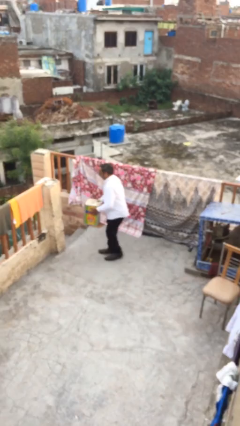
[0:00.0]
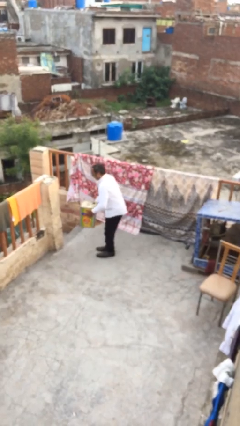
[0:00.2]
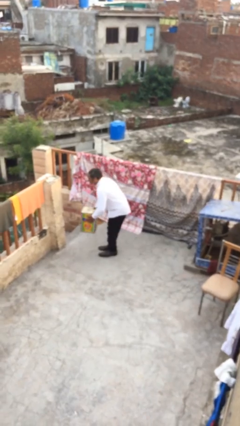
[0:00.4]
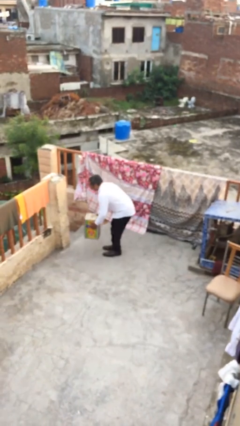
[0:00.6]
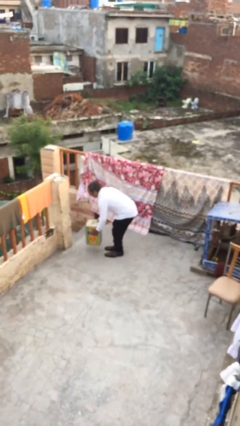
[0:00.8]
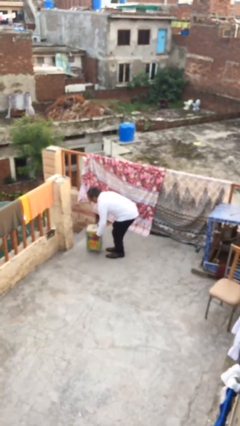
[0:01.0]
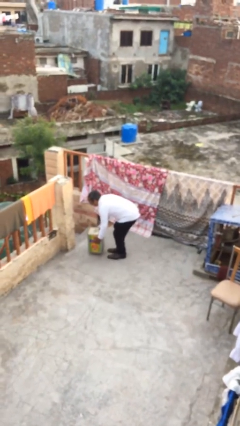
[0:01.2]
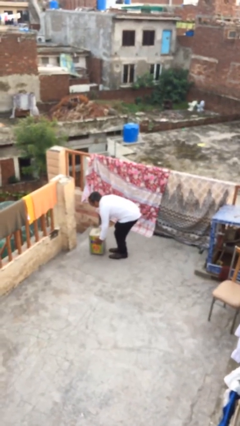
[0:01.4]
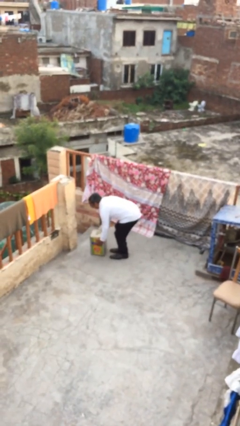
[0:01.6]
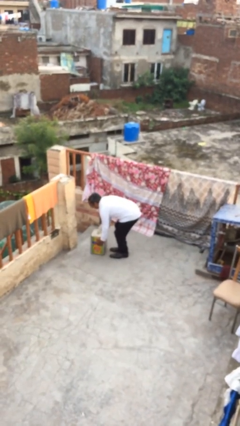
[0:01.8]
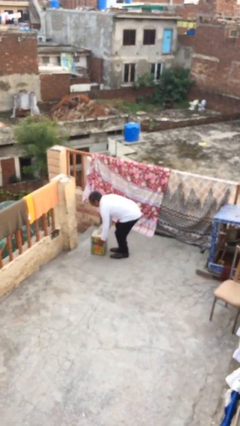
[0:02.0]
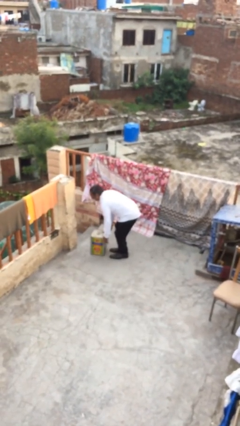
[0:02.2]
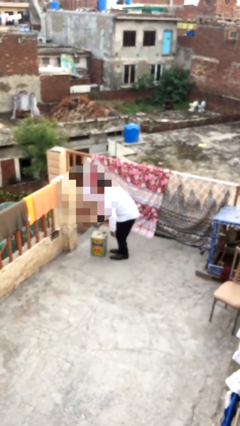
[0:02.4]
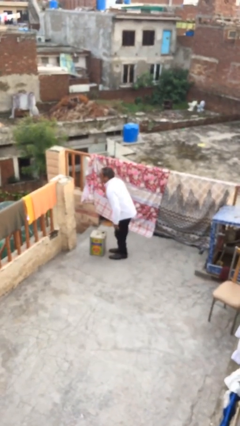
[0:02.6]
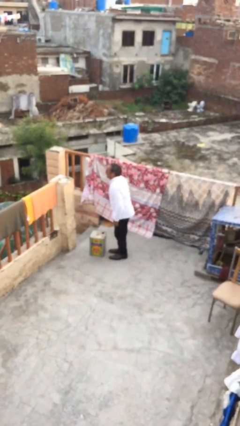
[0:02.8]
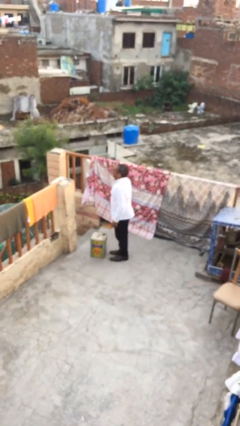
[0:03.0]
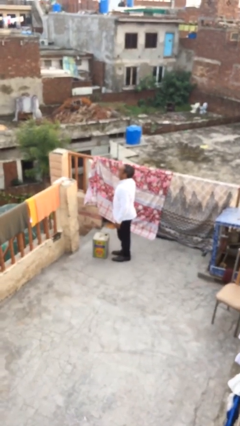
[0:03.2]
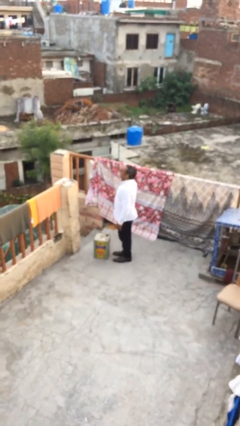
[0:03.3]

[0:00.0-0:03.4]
person puts down object on floor

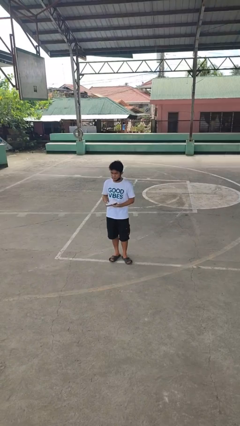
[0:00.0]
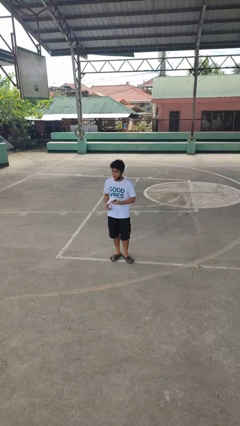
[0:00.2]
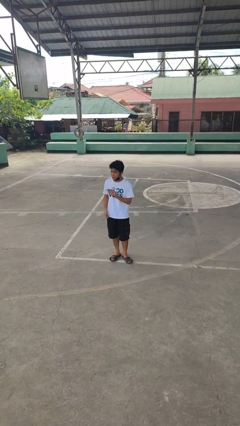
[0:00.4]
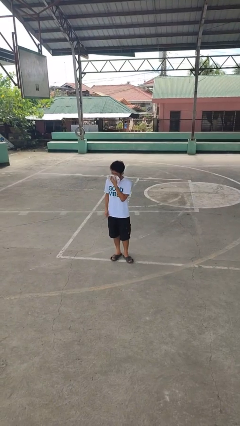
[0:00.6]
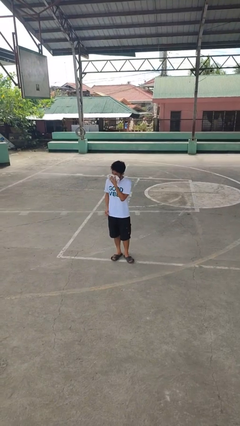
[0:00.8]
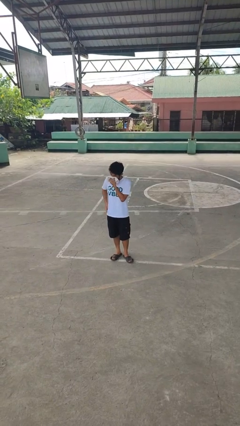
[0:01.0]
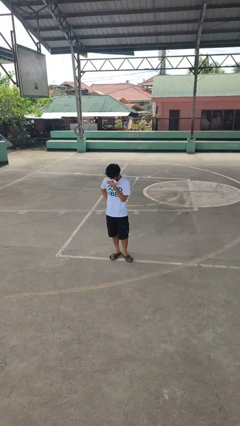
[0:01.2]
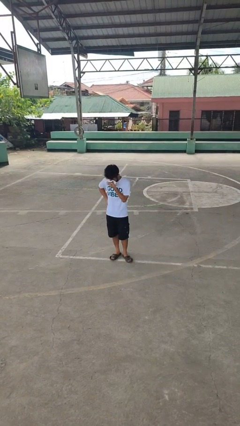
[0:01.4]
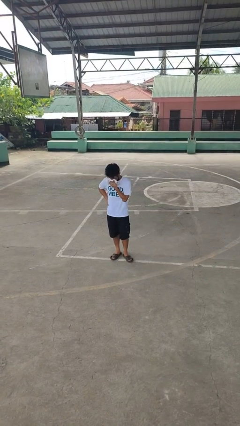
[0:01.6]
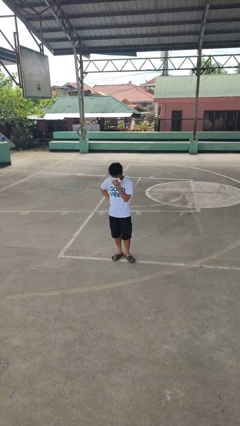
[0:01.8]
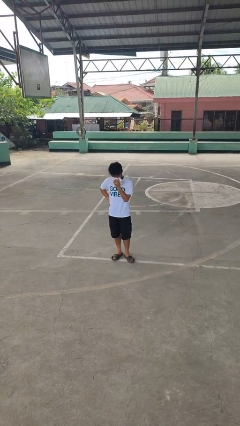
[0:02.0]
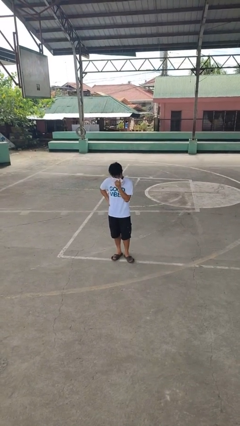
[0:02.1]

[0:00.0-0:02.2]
person blows nose

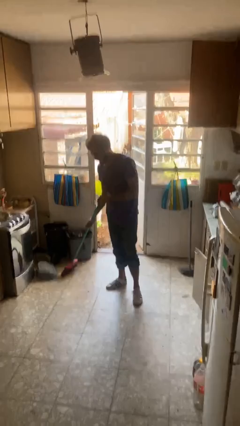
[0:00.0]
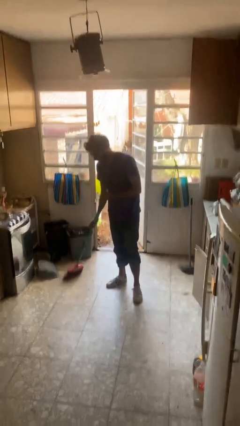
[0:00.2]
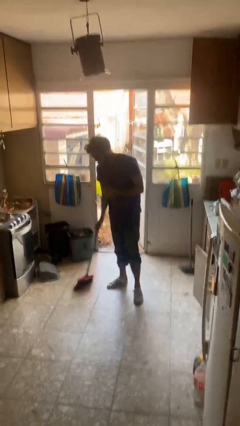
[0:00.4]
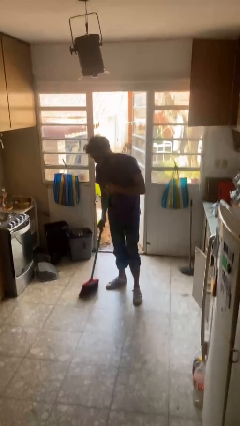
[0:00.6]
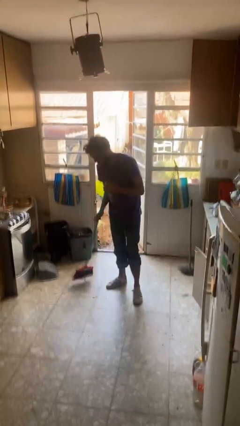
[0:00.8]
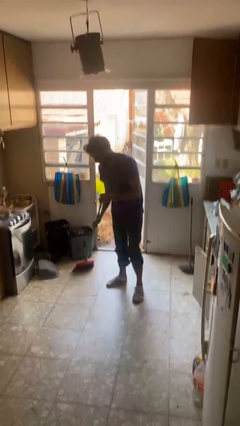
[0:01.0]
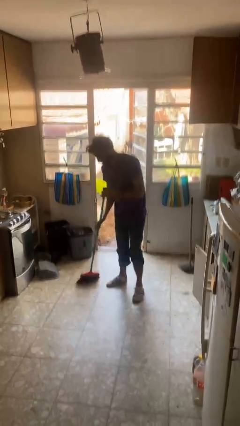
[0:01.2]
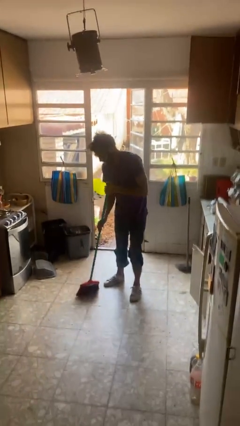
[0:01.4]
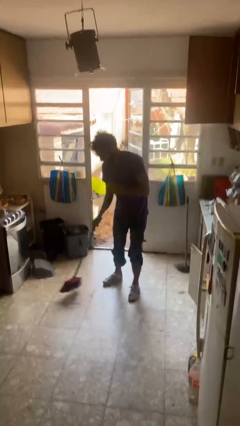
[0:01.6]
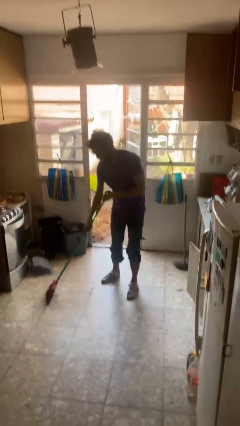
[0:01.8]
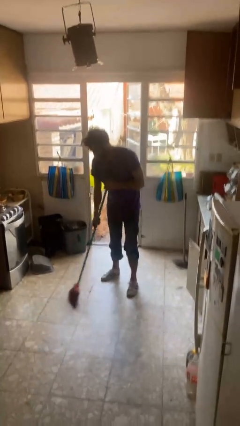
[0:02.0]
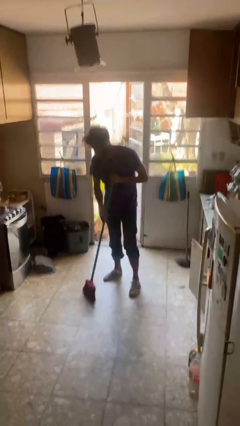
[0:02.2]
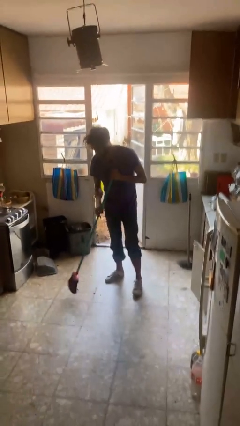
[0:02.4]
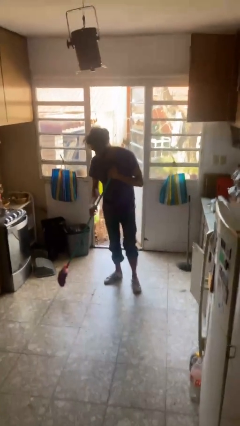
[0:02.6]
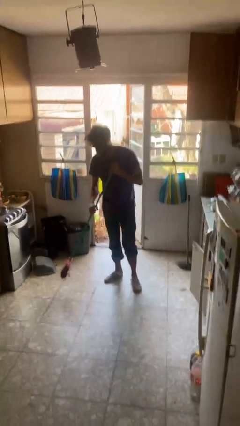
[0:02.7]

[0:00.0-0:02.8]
person sweeps floor

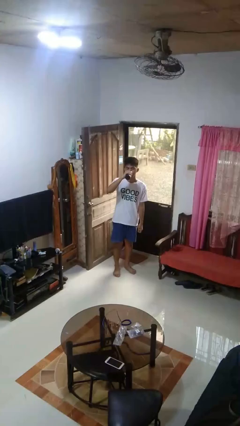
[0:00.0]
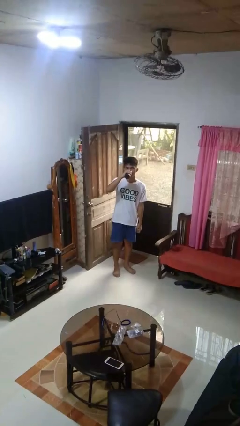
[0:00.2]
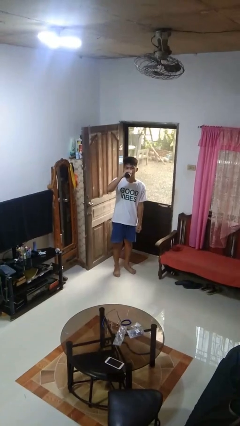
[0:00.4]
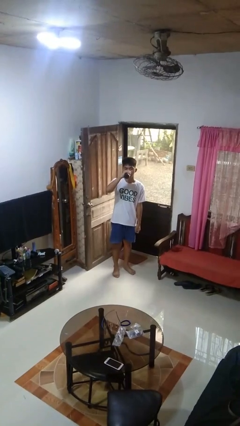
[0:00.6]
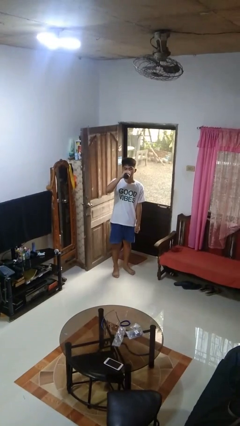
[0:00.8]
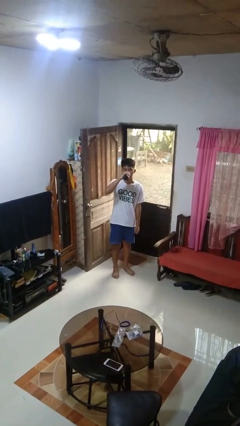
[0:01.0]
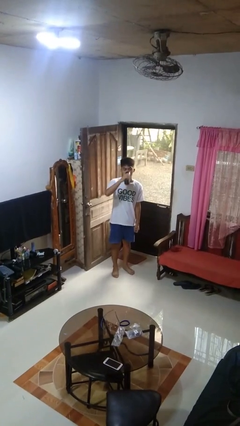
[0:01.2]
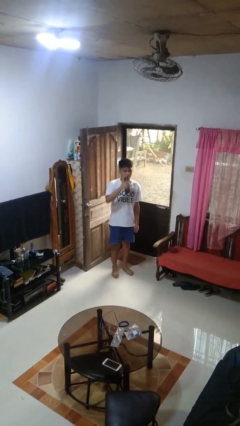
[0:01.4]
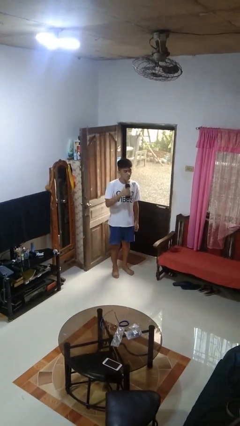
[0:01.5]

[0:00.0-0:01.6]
person drinks from bottle

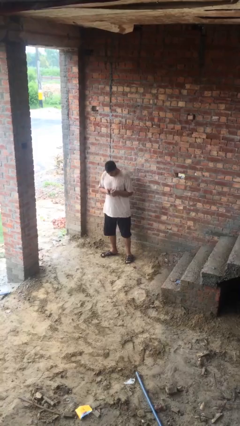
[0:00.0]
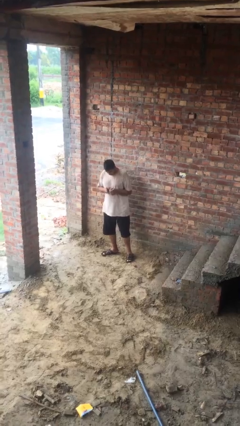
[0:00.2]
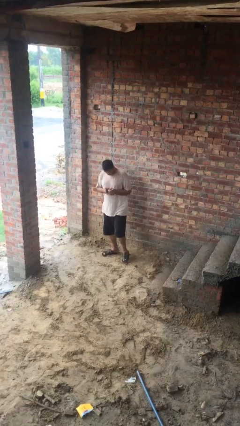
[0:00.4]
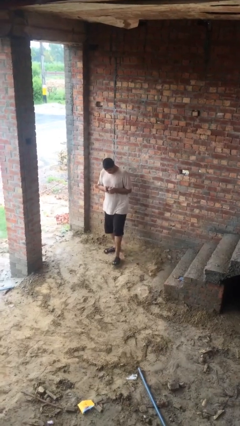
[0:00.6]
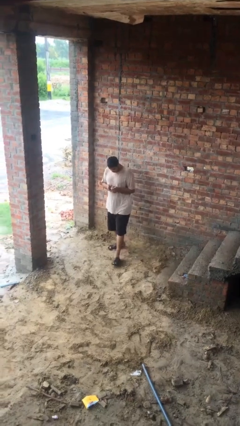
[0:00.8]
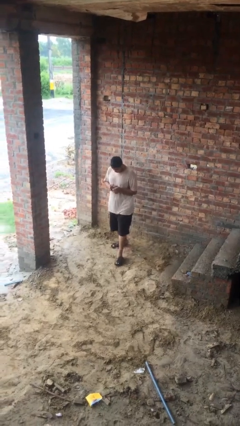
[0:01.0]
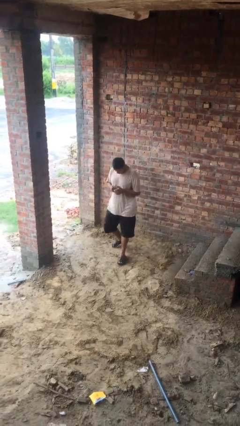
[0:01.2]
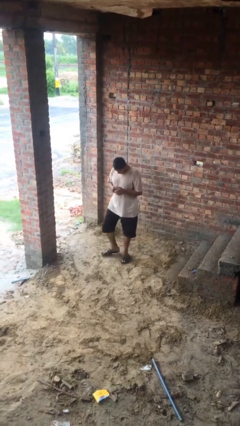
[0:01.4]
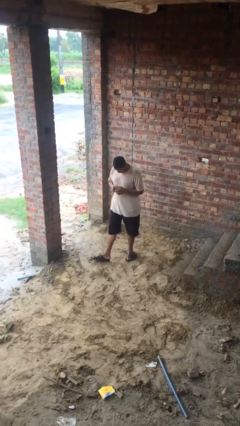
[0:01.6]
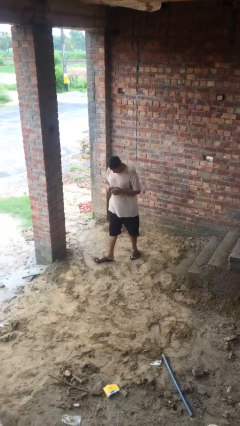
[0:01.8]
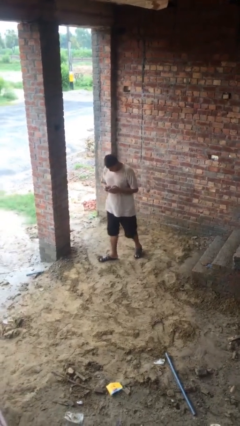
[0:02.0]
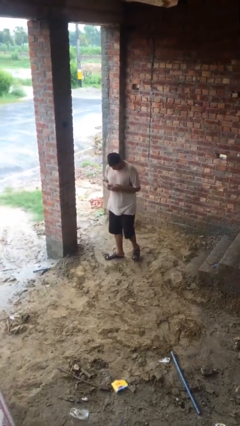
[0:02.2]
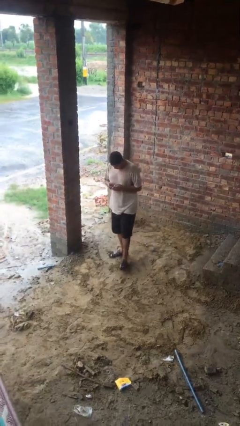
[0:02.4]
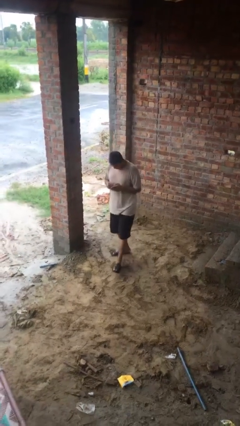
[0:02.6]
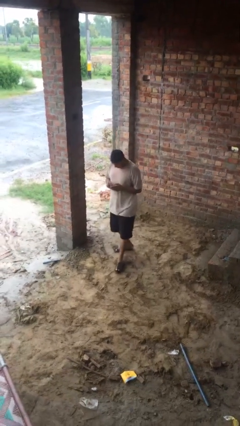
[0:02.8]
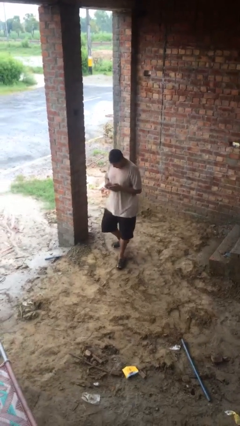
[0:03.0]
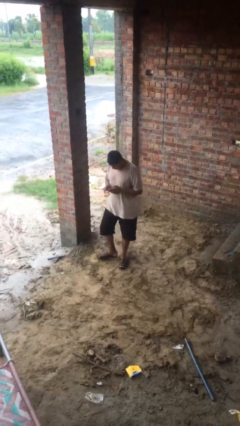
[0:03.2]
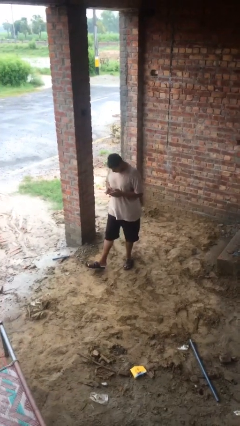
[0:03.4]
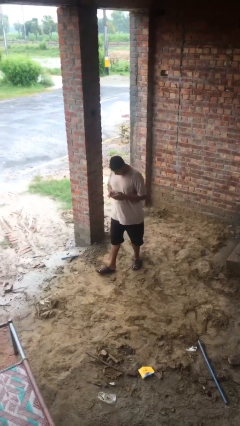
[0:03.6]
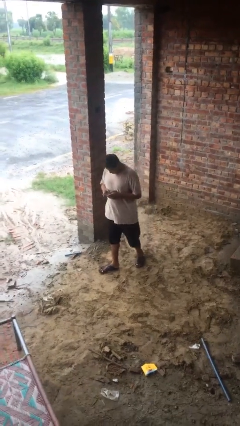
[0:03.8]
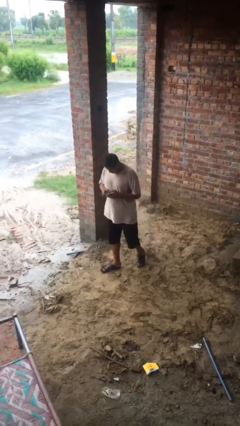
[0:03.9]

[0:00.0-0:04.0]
person texts on phone

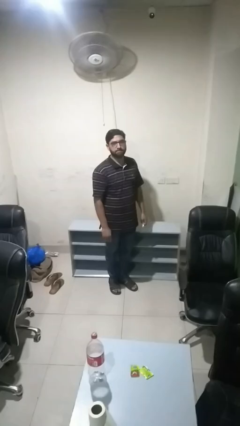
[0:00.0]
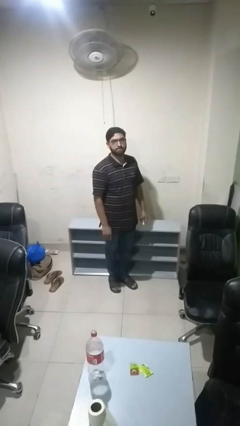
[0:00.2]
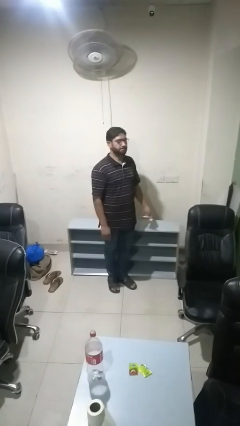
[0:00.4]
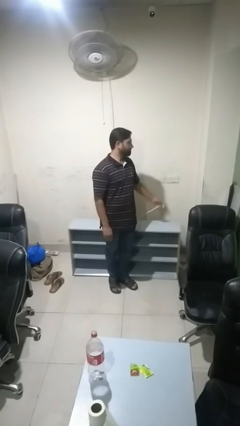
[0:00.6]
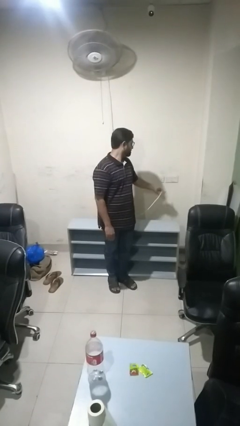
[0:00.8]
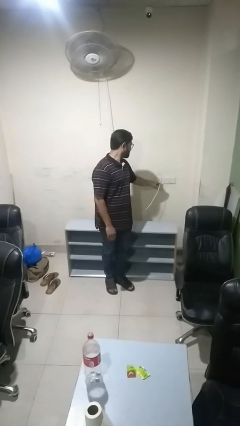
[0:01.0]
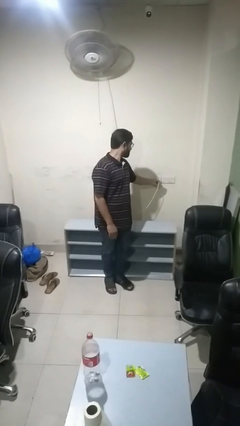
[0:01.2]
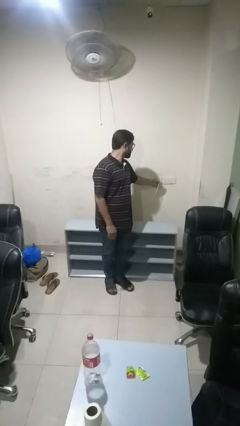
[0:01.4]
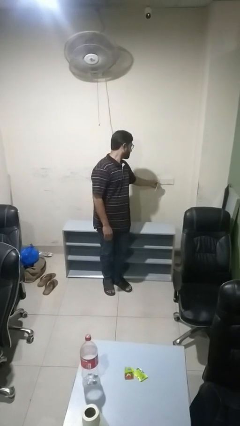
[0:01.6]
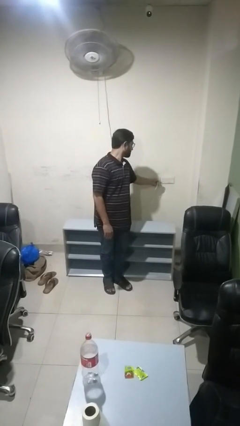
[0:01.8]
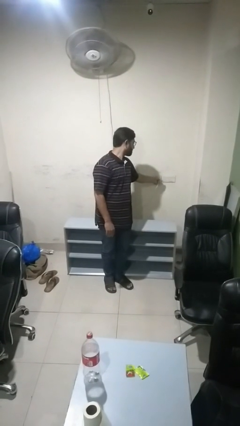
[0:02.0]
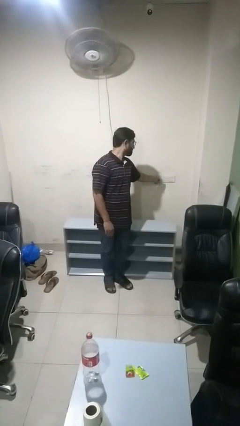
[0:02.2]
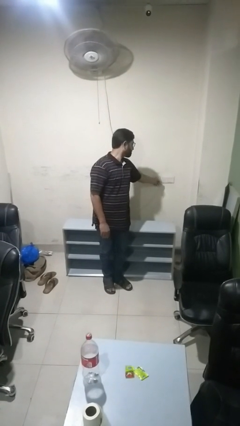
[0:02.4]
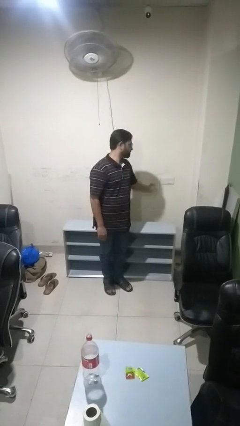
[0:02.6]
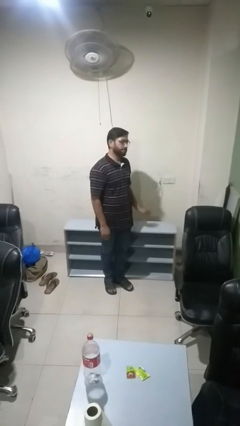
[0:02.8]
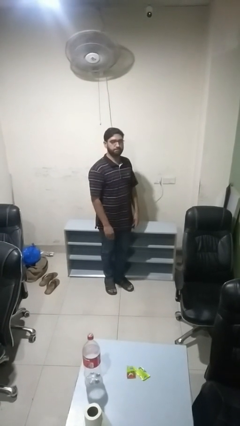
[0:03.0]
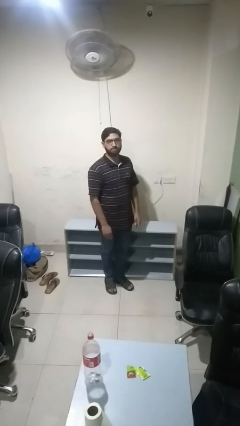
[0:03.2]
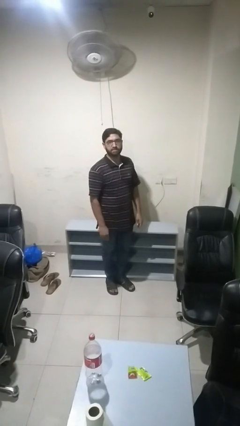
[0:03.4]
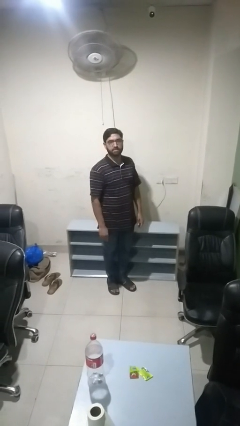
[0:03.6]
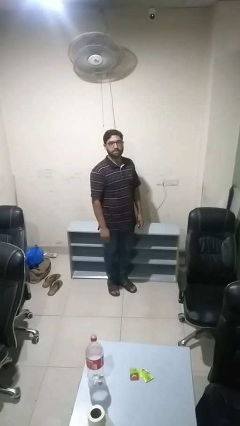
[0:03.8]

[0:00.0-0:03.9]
person plugs into electrical socket
